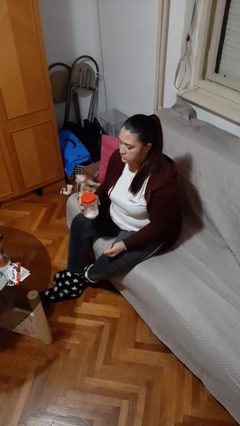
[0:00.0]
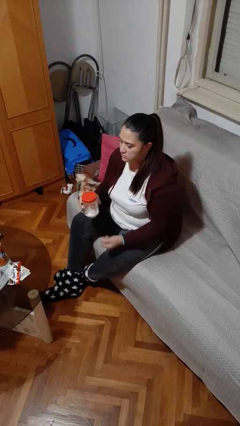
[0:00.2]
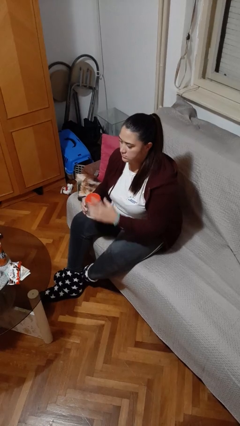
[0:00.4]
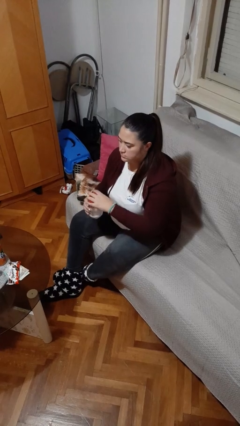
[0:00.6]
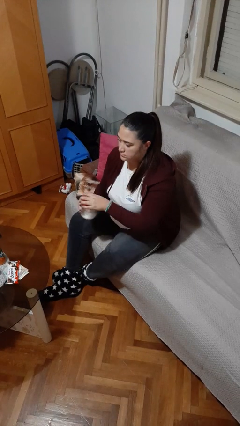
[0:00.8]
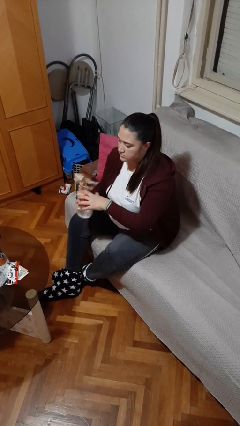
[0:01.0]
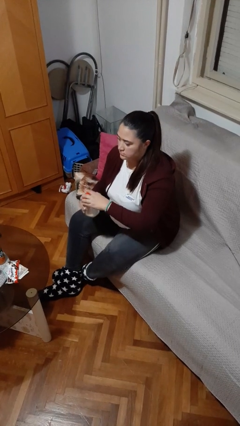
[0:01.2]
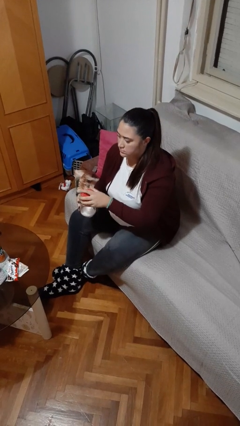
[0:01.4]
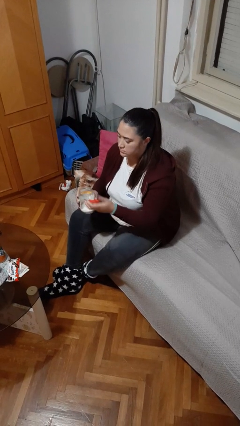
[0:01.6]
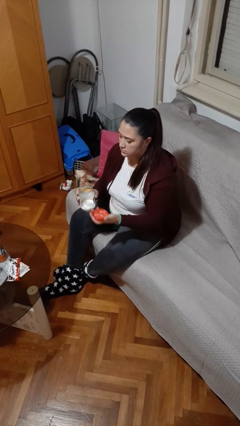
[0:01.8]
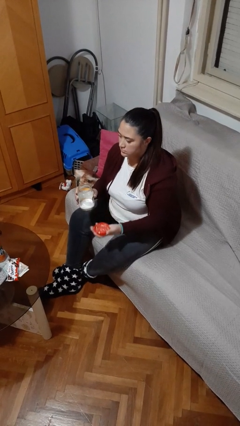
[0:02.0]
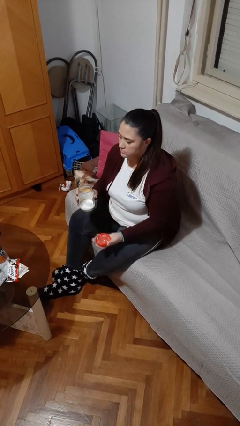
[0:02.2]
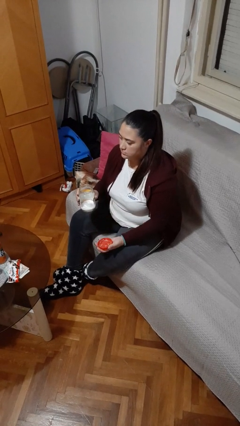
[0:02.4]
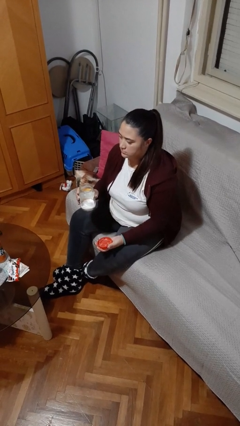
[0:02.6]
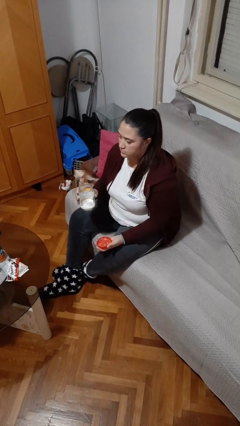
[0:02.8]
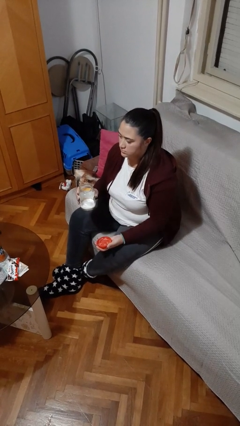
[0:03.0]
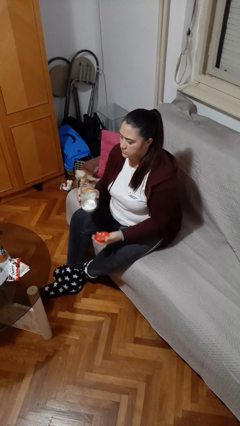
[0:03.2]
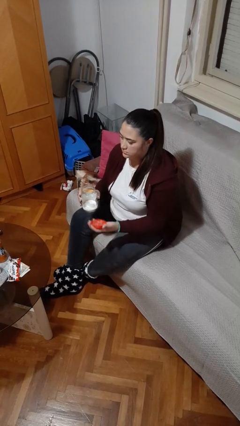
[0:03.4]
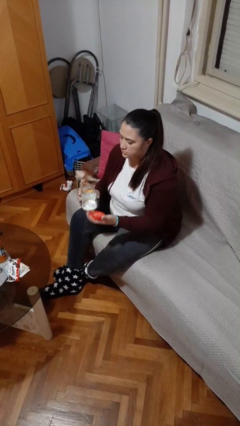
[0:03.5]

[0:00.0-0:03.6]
person opens jar

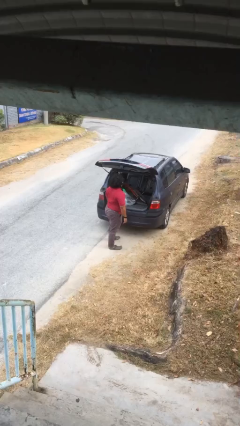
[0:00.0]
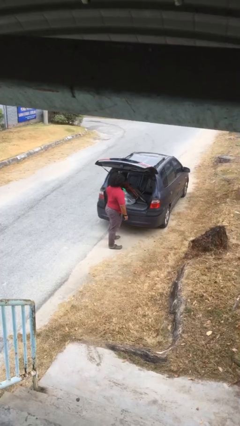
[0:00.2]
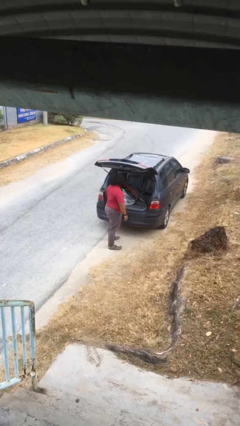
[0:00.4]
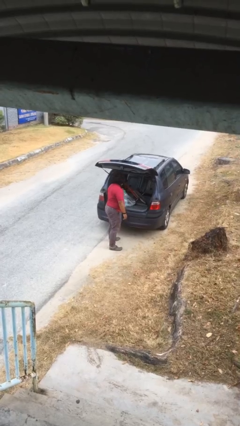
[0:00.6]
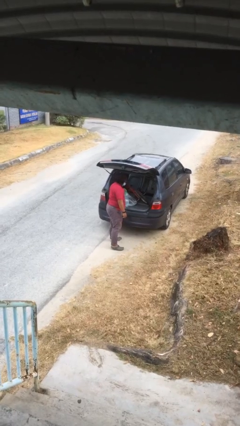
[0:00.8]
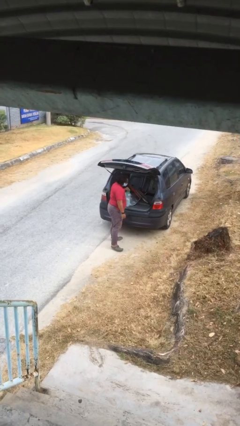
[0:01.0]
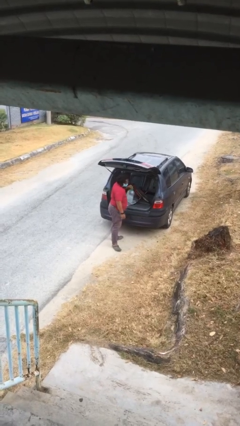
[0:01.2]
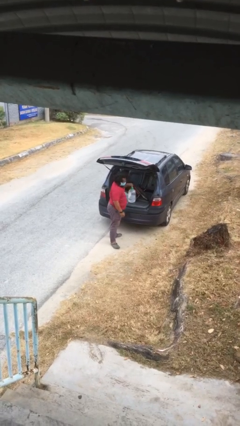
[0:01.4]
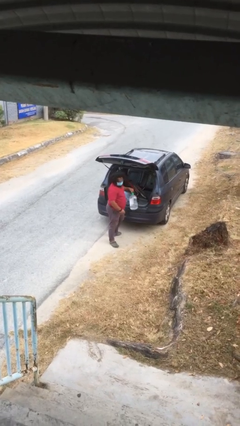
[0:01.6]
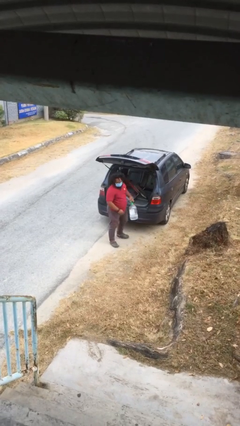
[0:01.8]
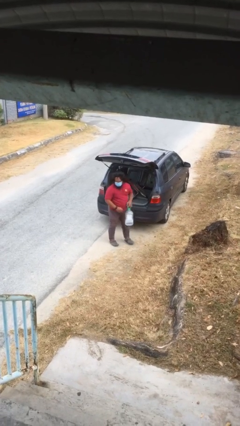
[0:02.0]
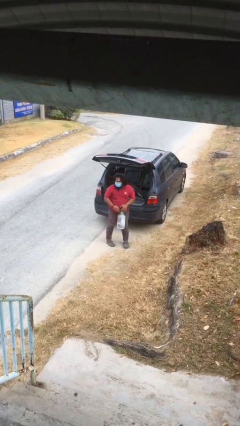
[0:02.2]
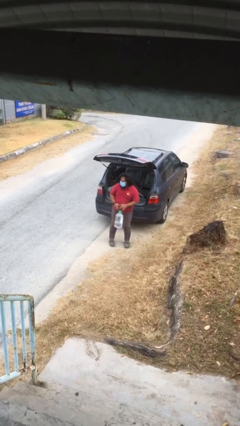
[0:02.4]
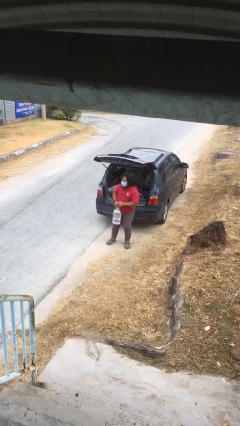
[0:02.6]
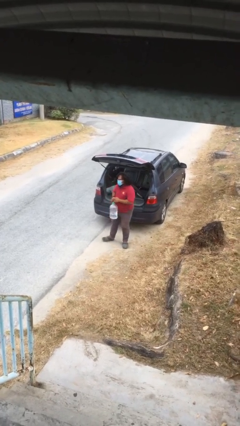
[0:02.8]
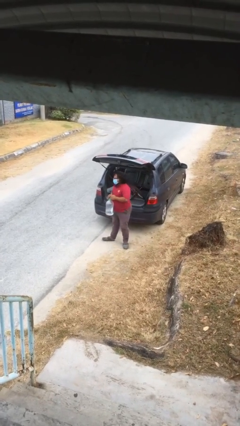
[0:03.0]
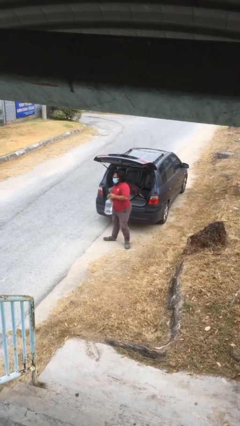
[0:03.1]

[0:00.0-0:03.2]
person unloads car

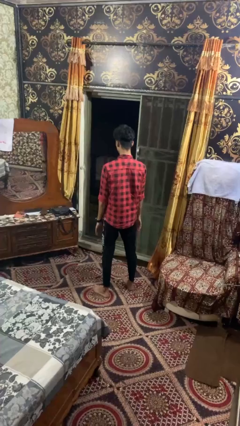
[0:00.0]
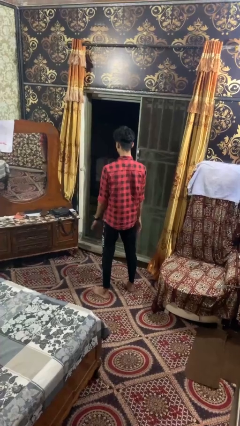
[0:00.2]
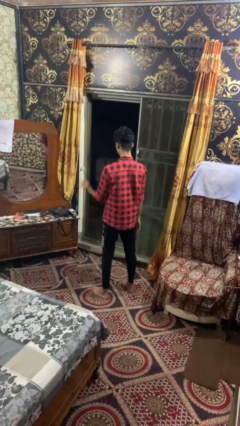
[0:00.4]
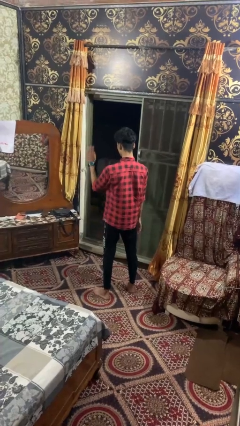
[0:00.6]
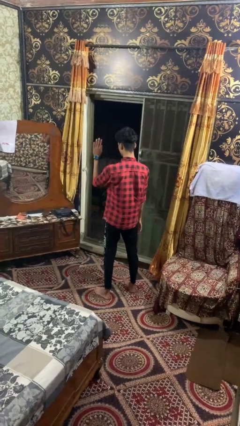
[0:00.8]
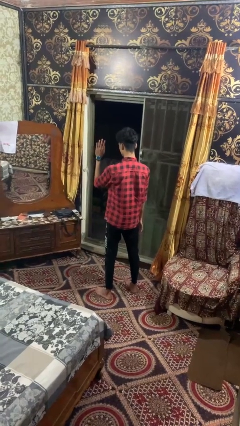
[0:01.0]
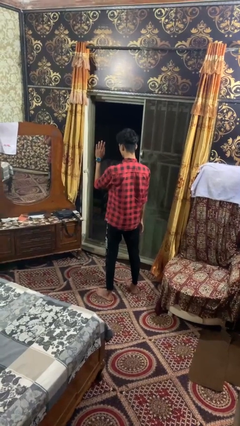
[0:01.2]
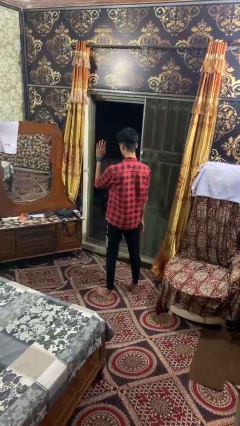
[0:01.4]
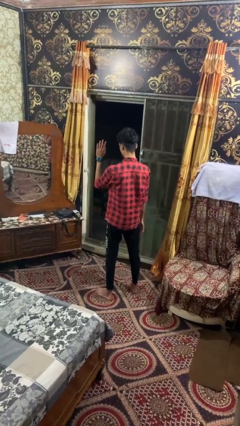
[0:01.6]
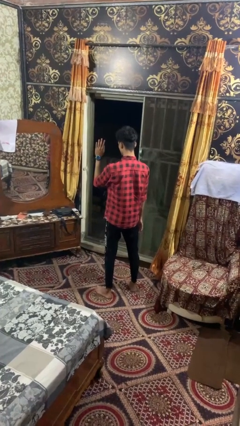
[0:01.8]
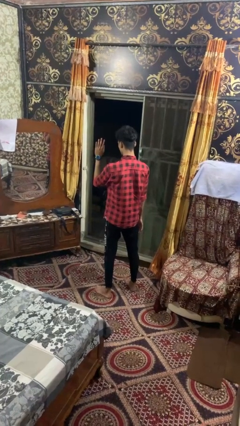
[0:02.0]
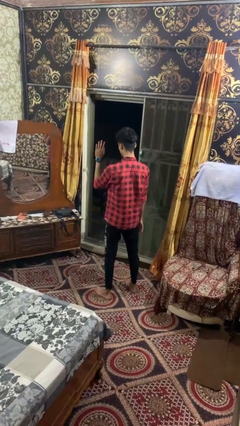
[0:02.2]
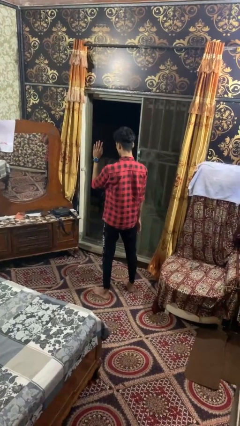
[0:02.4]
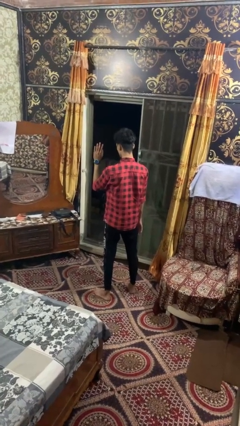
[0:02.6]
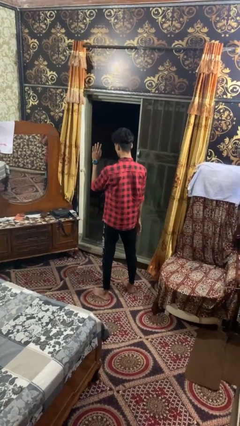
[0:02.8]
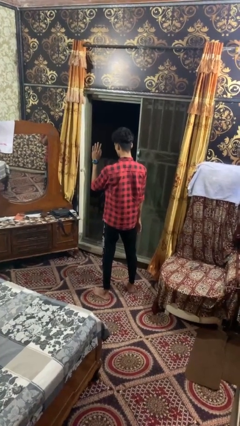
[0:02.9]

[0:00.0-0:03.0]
person gestures swipe left

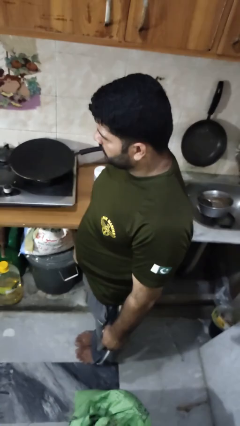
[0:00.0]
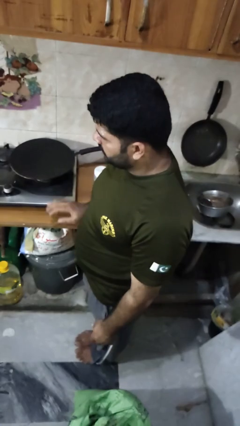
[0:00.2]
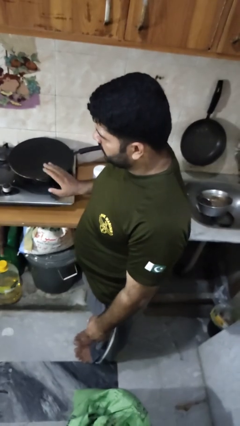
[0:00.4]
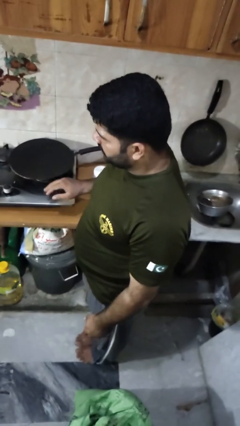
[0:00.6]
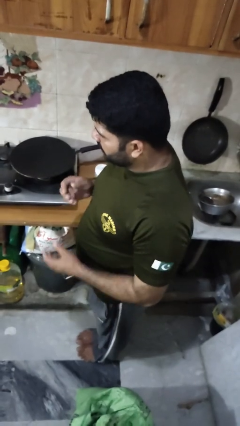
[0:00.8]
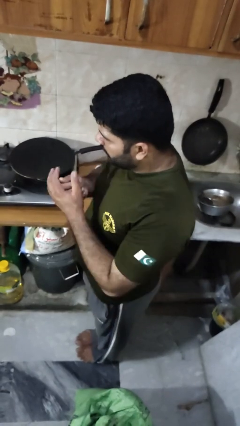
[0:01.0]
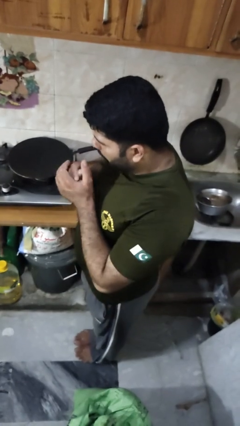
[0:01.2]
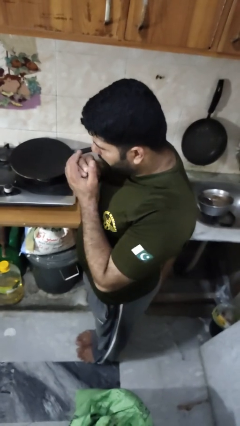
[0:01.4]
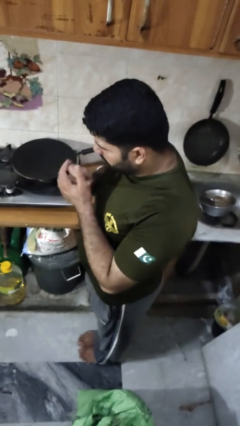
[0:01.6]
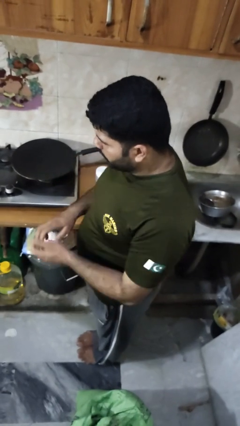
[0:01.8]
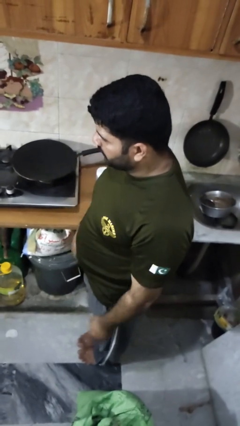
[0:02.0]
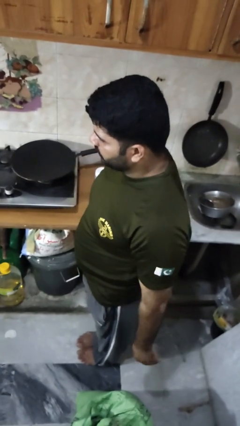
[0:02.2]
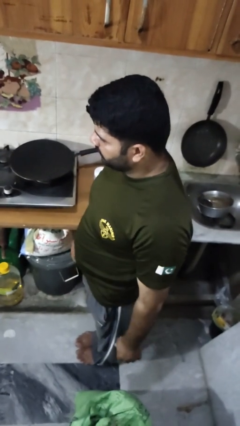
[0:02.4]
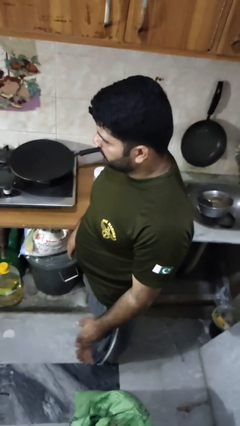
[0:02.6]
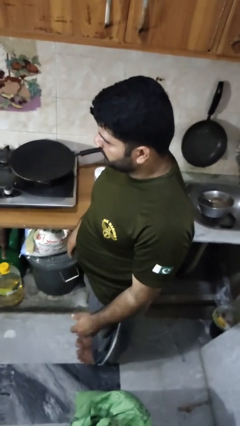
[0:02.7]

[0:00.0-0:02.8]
person burns hand

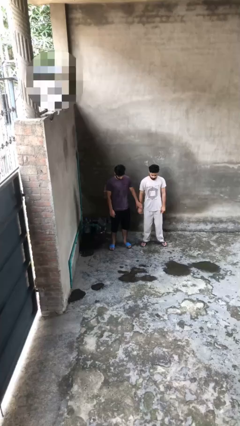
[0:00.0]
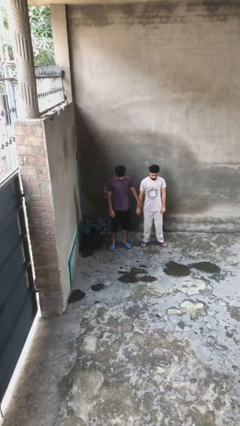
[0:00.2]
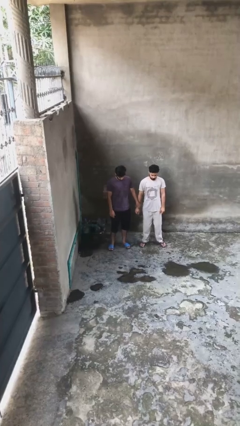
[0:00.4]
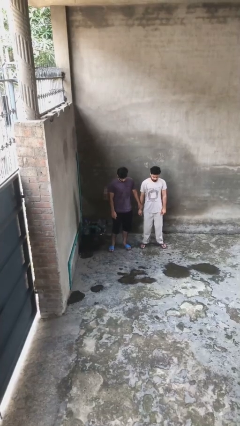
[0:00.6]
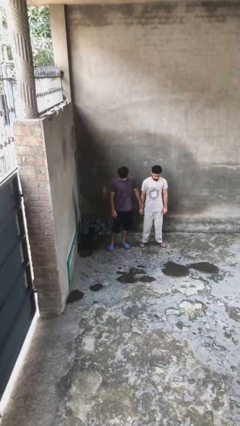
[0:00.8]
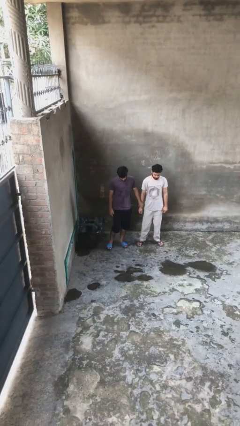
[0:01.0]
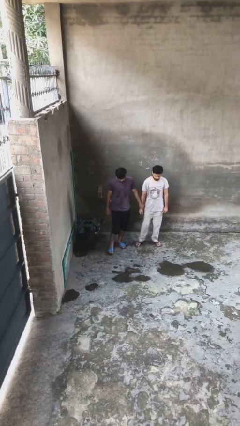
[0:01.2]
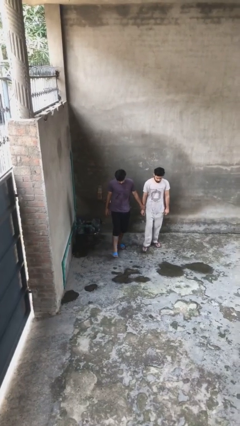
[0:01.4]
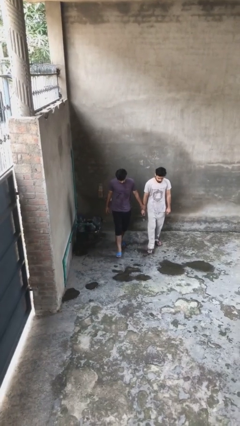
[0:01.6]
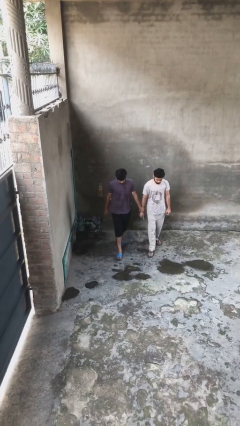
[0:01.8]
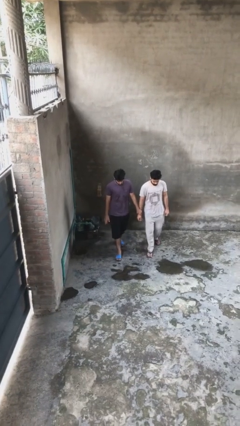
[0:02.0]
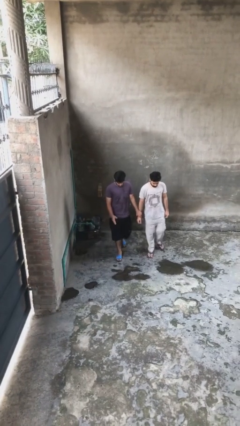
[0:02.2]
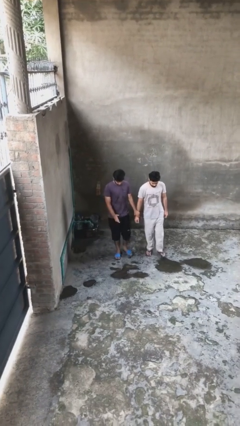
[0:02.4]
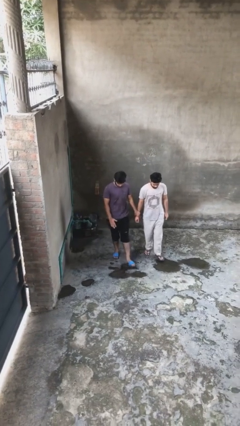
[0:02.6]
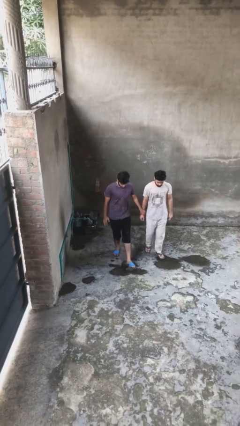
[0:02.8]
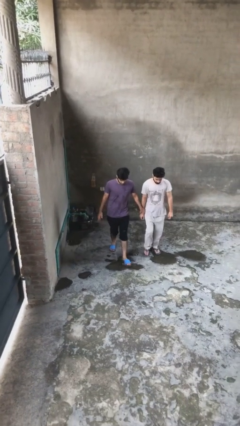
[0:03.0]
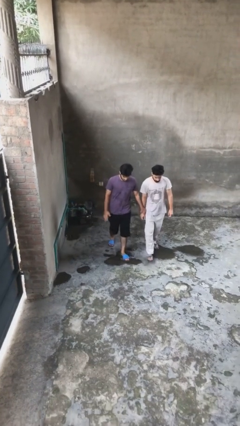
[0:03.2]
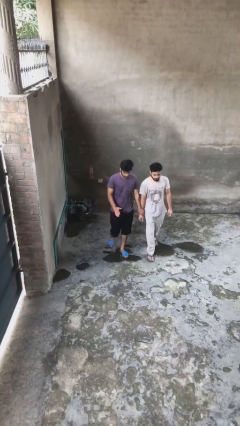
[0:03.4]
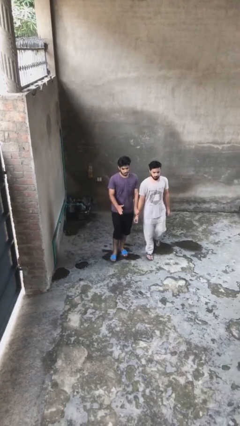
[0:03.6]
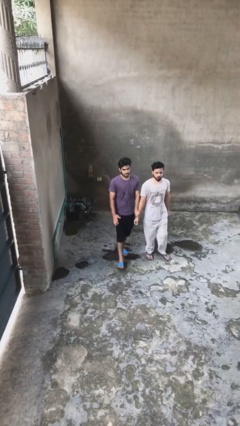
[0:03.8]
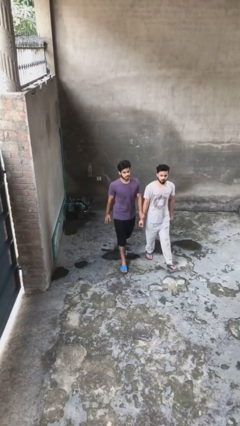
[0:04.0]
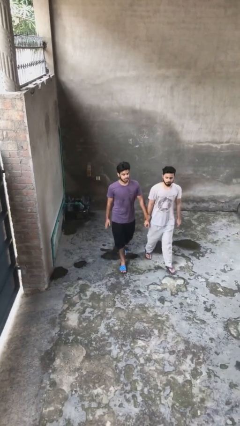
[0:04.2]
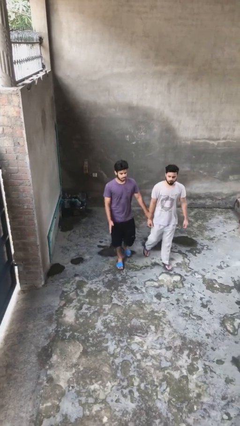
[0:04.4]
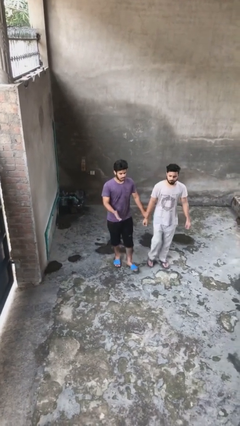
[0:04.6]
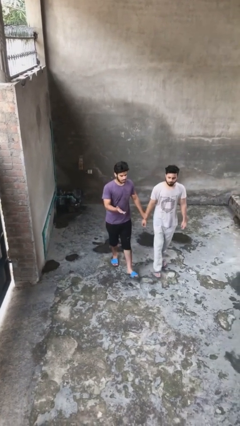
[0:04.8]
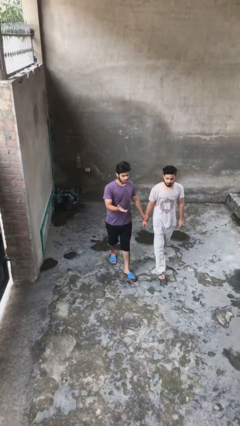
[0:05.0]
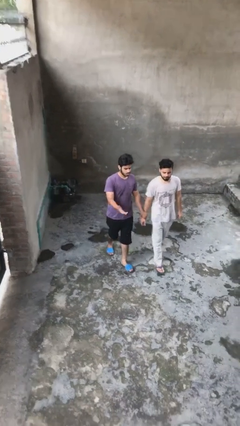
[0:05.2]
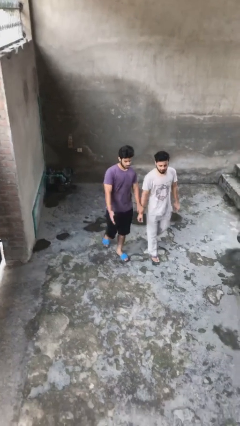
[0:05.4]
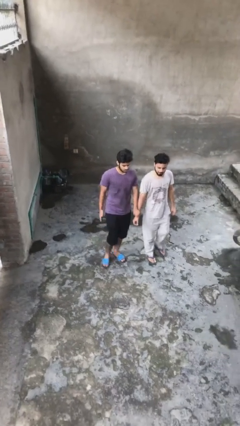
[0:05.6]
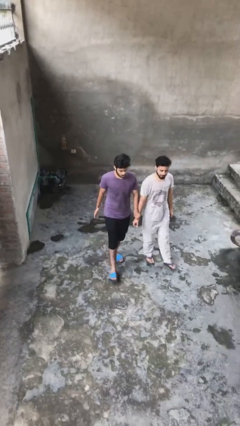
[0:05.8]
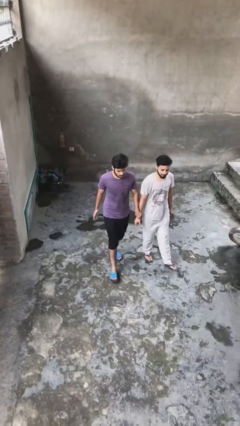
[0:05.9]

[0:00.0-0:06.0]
person holds hand
